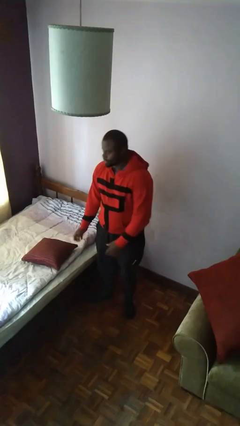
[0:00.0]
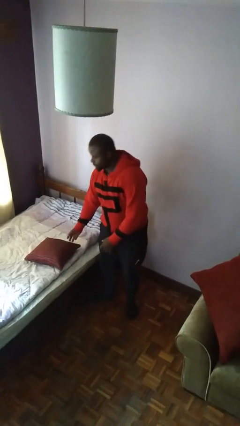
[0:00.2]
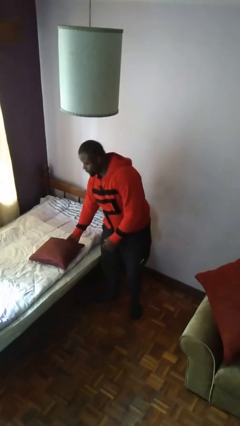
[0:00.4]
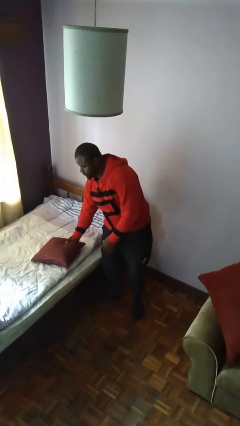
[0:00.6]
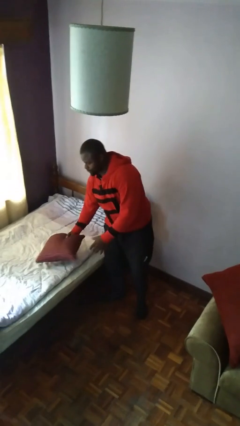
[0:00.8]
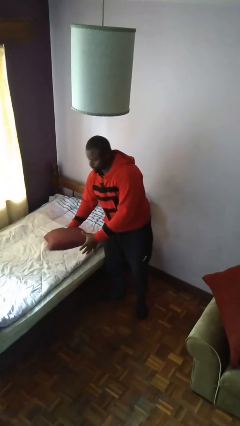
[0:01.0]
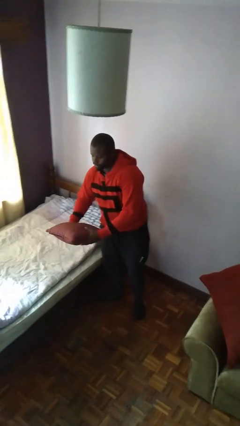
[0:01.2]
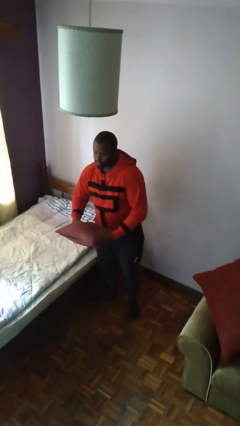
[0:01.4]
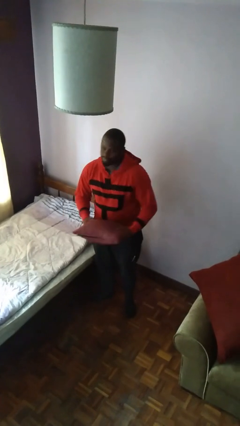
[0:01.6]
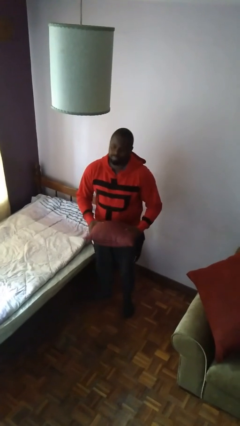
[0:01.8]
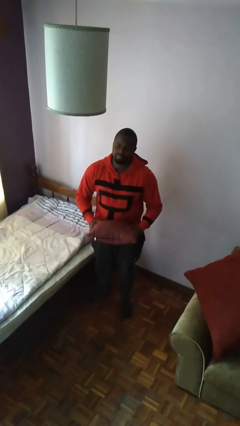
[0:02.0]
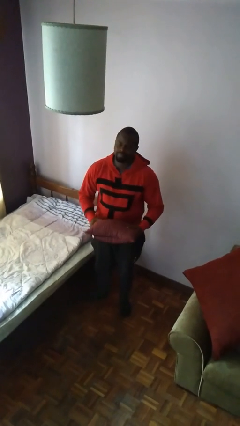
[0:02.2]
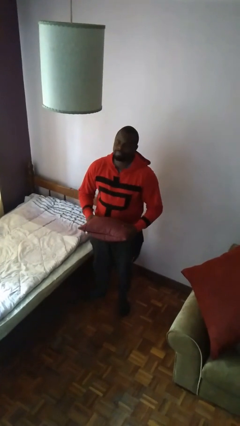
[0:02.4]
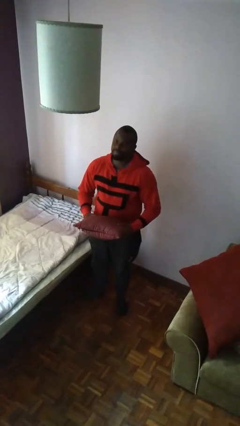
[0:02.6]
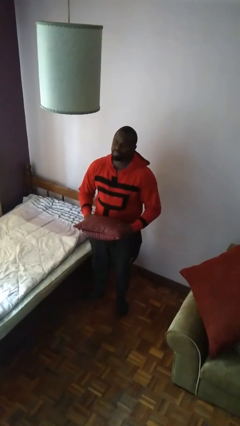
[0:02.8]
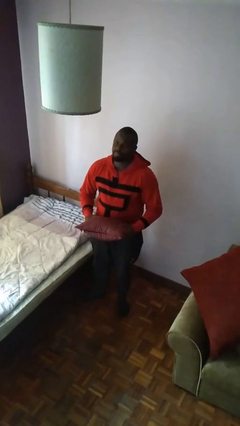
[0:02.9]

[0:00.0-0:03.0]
person picks up object from bed

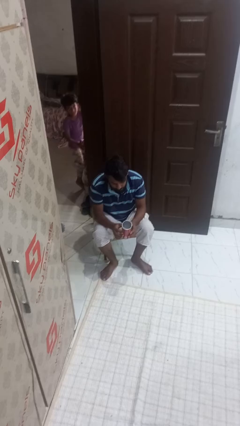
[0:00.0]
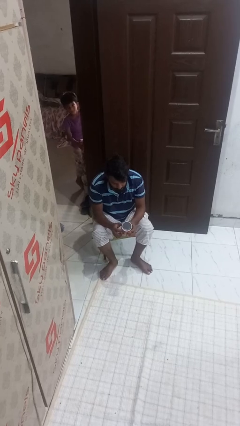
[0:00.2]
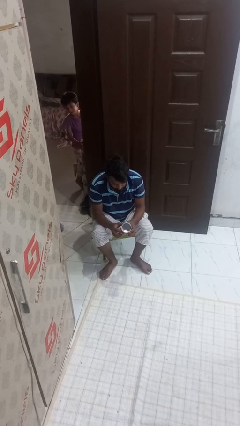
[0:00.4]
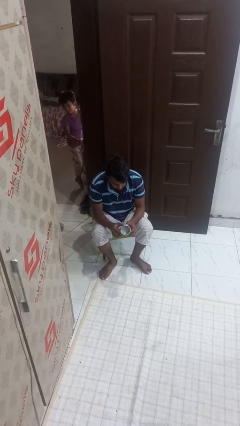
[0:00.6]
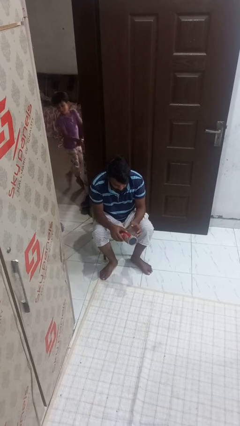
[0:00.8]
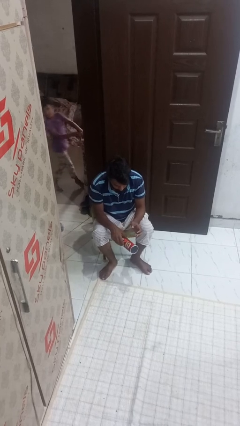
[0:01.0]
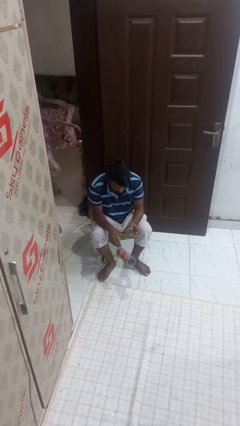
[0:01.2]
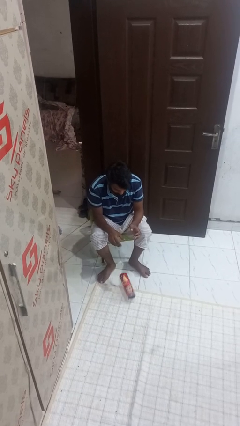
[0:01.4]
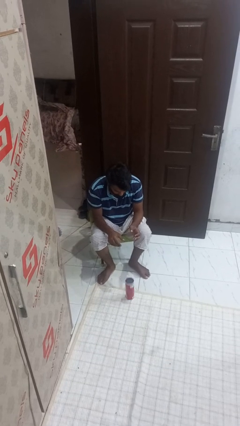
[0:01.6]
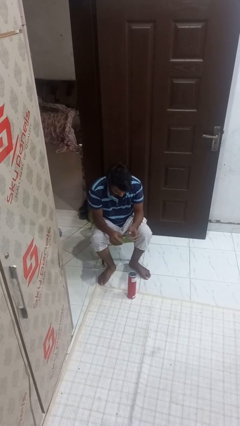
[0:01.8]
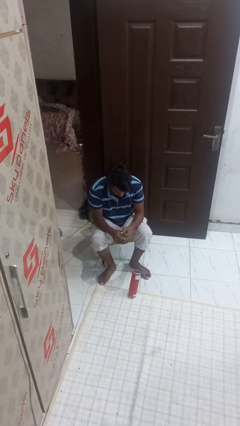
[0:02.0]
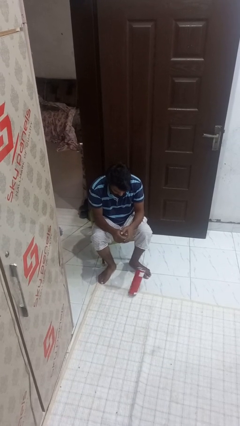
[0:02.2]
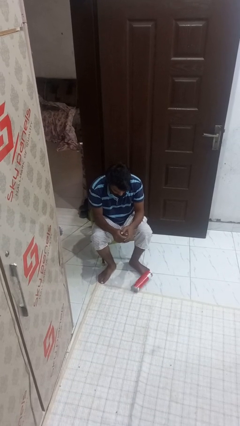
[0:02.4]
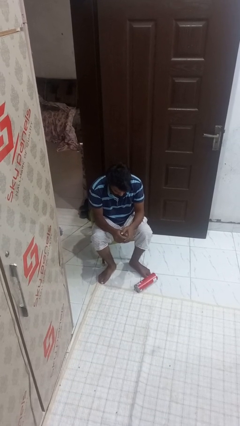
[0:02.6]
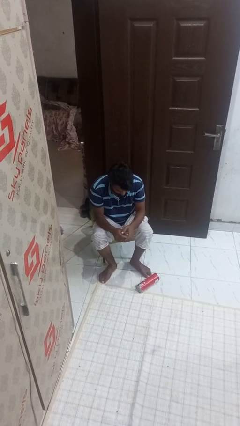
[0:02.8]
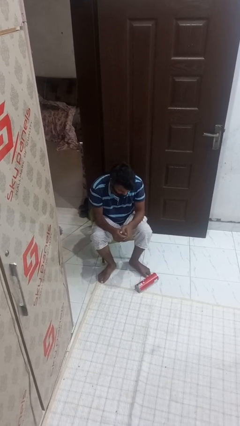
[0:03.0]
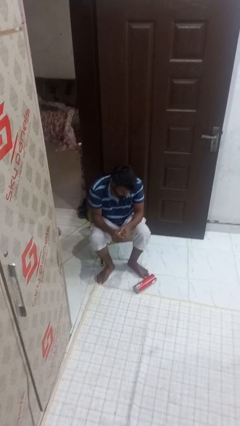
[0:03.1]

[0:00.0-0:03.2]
person drops object

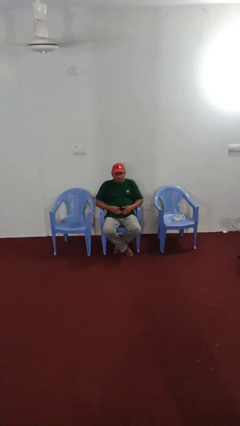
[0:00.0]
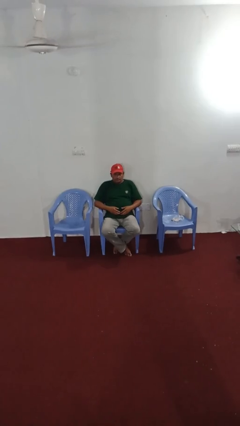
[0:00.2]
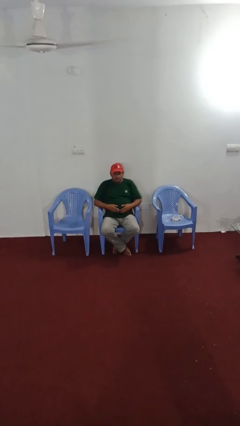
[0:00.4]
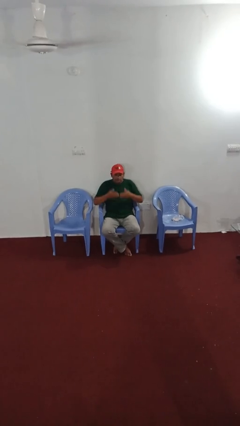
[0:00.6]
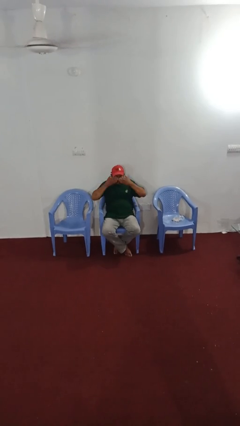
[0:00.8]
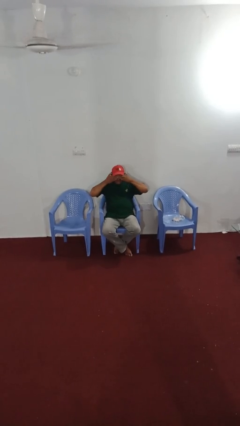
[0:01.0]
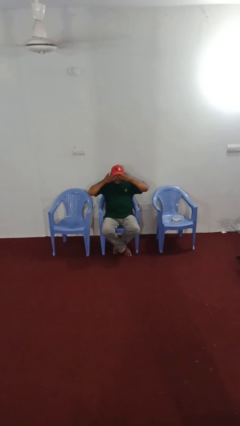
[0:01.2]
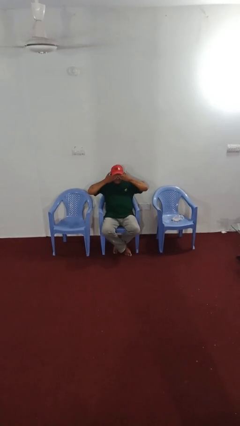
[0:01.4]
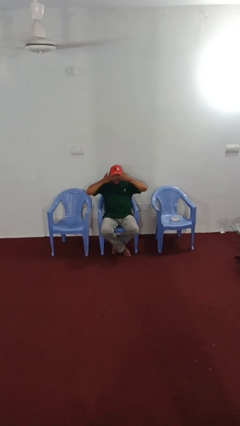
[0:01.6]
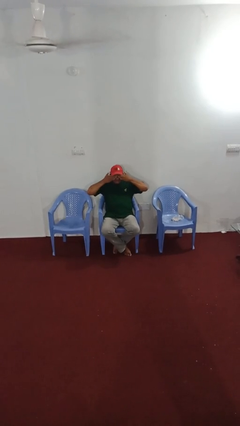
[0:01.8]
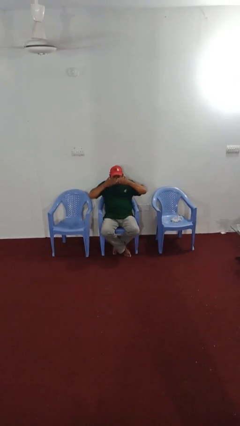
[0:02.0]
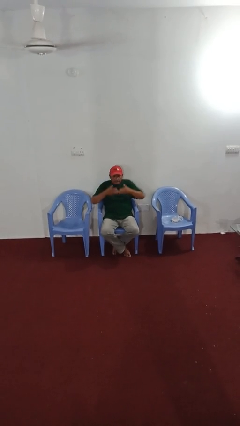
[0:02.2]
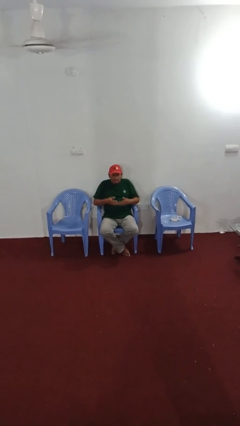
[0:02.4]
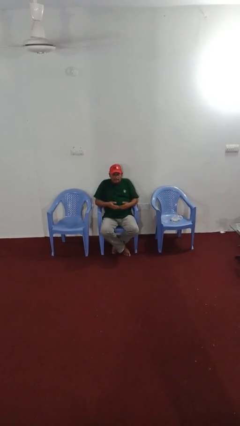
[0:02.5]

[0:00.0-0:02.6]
person rubs eyes

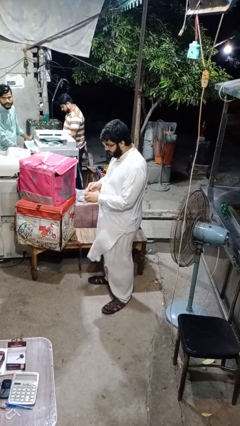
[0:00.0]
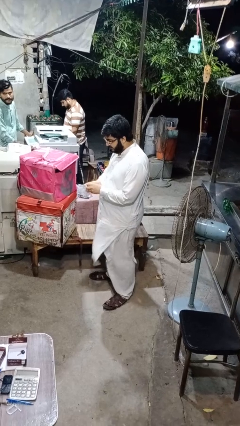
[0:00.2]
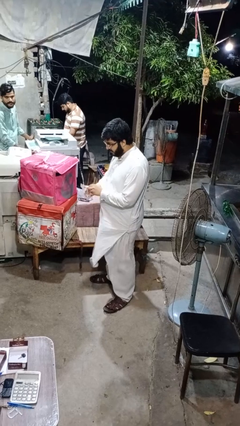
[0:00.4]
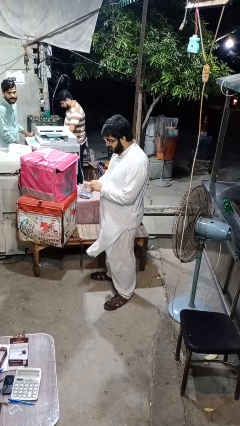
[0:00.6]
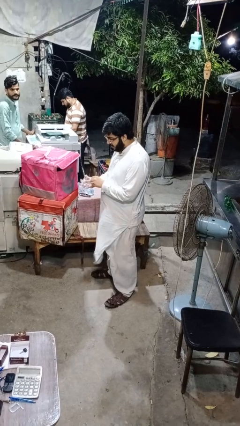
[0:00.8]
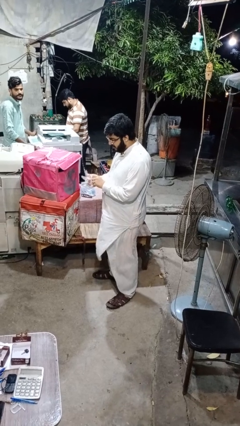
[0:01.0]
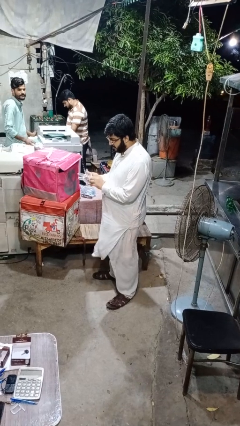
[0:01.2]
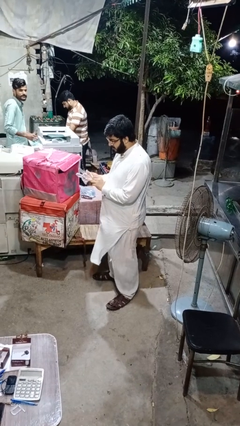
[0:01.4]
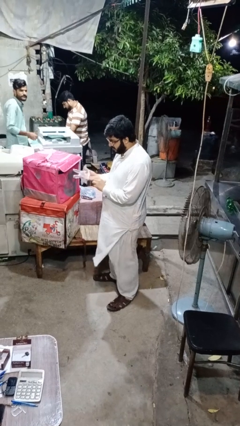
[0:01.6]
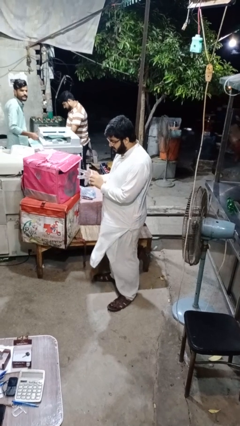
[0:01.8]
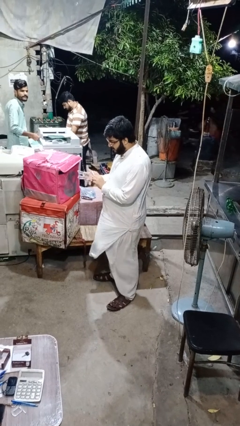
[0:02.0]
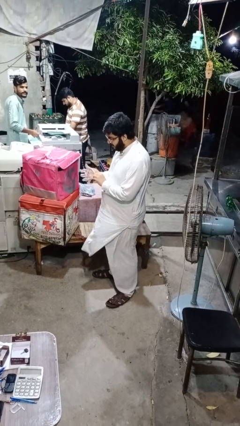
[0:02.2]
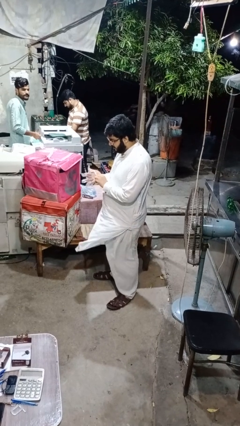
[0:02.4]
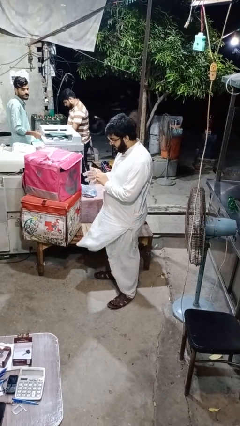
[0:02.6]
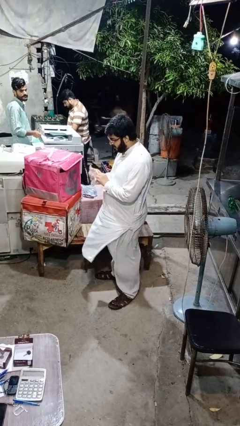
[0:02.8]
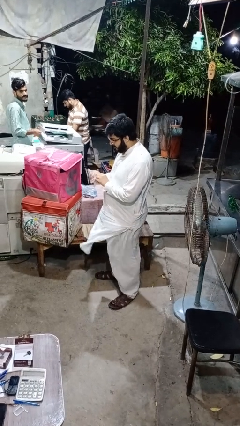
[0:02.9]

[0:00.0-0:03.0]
person puts on gloves

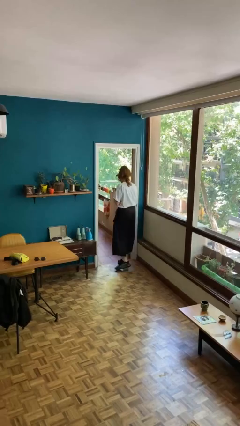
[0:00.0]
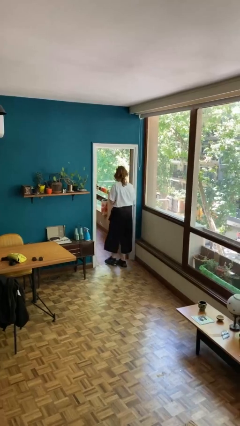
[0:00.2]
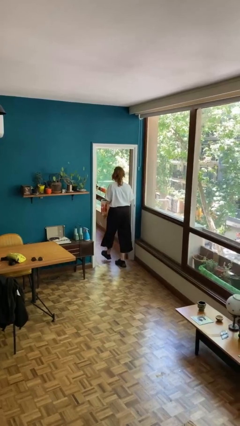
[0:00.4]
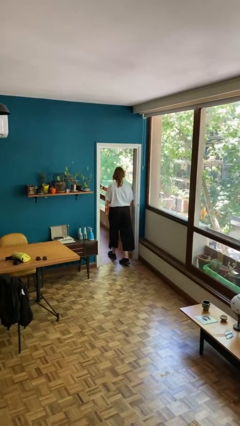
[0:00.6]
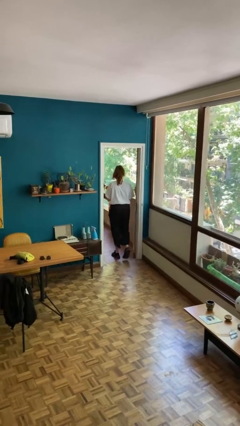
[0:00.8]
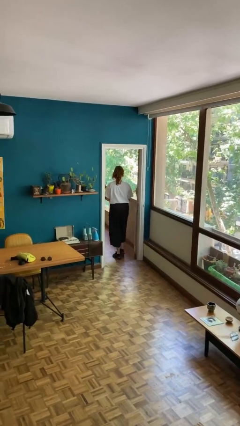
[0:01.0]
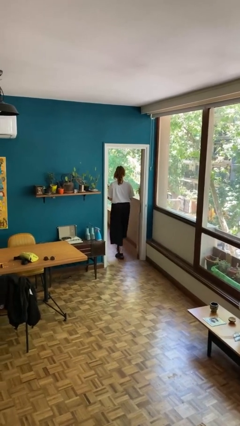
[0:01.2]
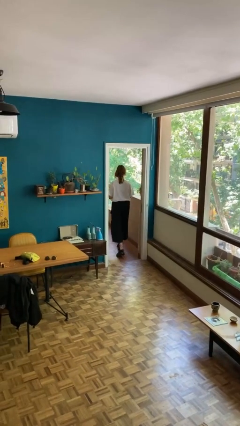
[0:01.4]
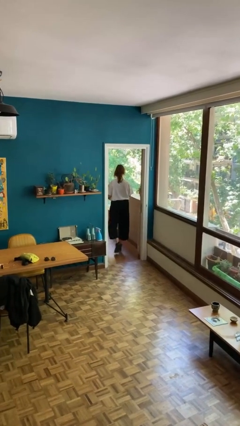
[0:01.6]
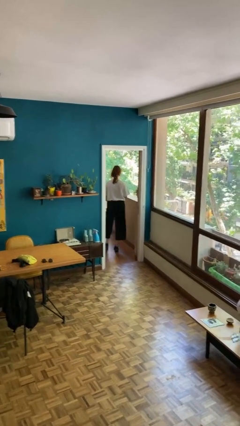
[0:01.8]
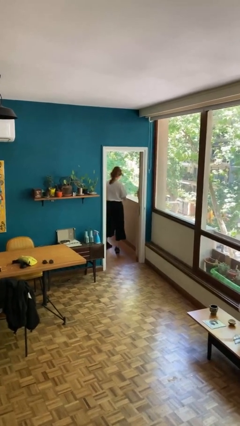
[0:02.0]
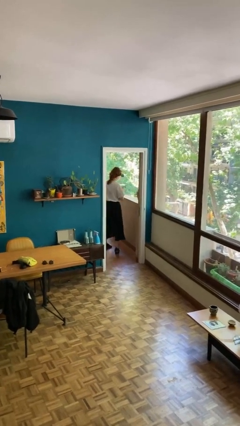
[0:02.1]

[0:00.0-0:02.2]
person exits scene through structure

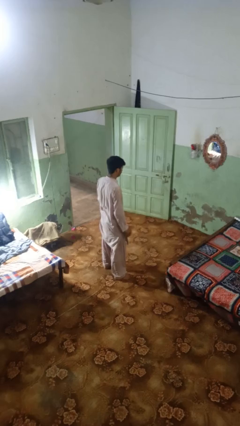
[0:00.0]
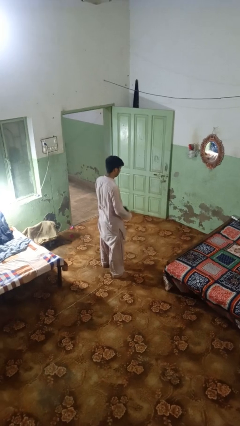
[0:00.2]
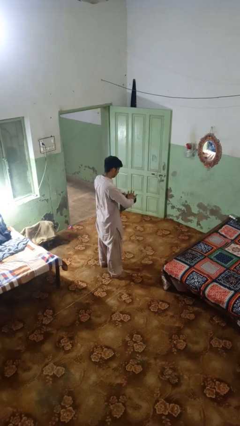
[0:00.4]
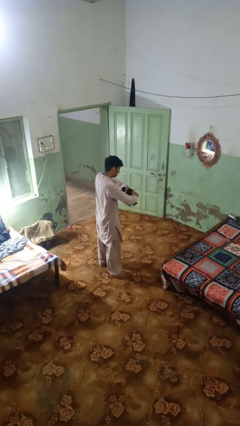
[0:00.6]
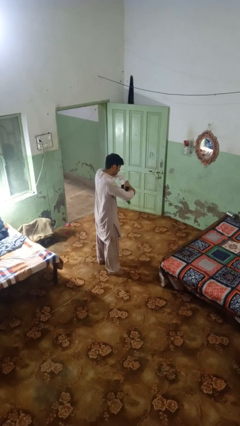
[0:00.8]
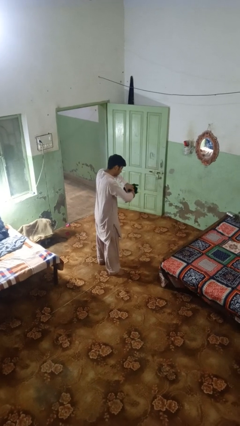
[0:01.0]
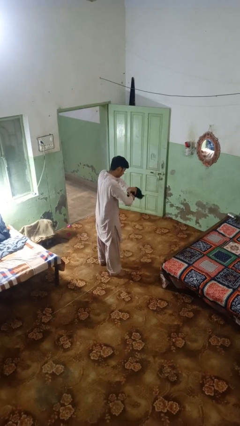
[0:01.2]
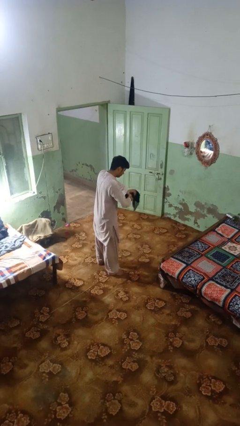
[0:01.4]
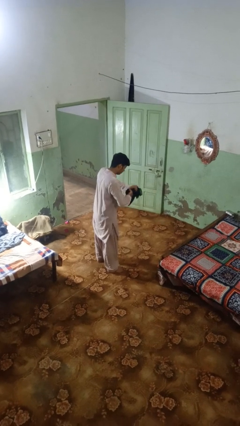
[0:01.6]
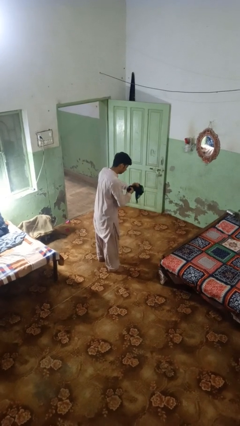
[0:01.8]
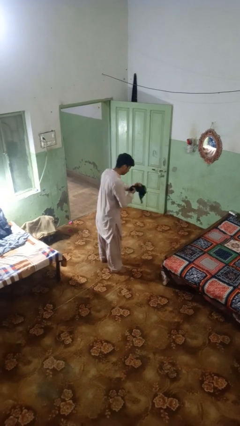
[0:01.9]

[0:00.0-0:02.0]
person squeezes object

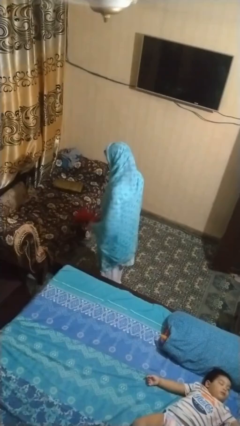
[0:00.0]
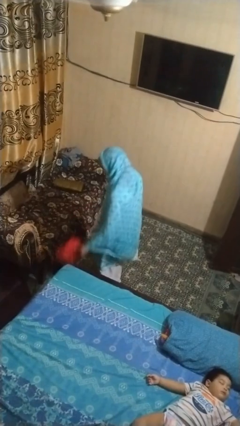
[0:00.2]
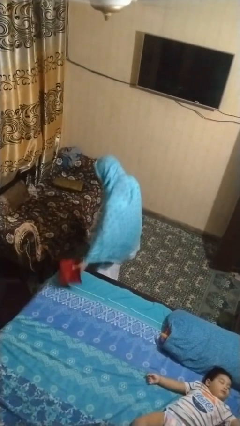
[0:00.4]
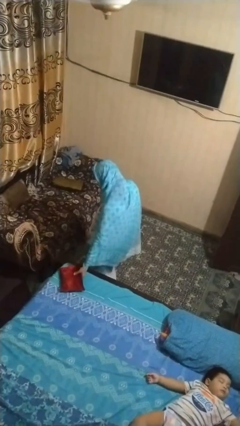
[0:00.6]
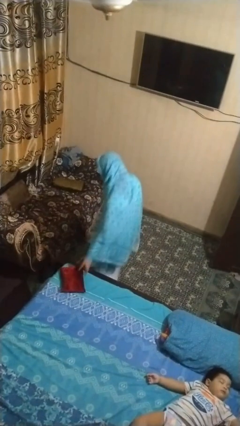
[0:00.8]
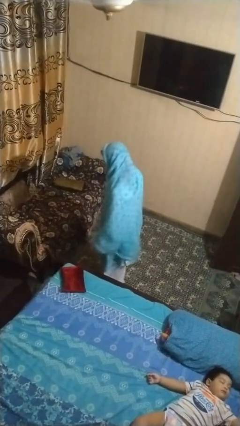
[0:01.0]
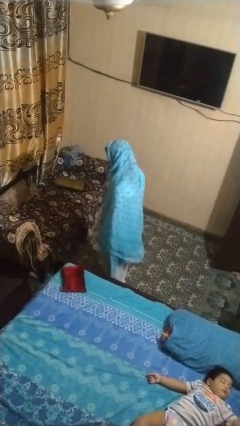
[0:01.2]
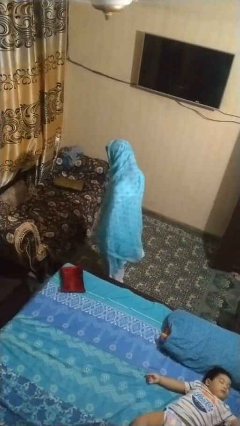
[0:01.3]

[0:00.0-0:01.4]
person puts down object on bed
